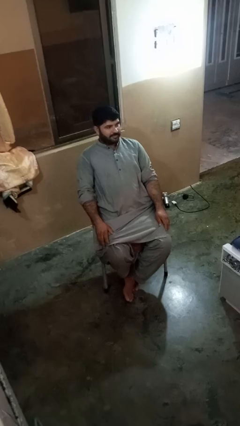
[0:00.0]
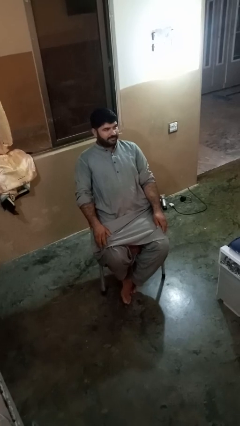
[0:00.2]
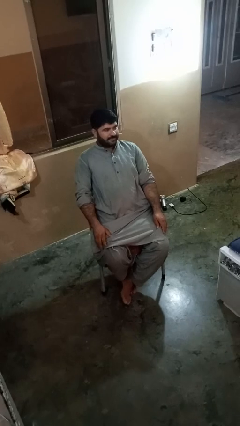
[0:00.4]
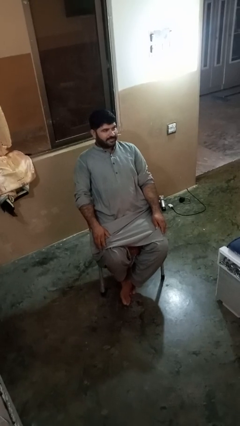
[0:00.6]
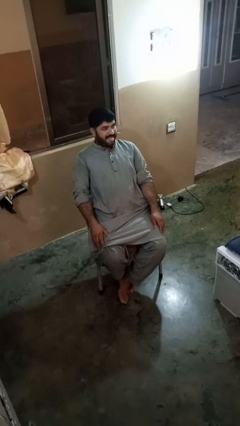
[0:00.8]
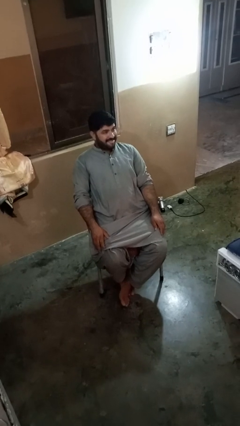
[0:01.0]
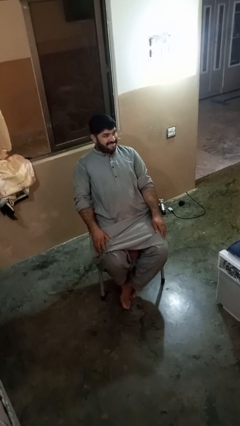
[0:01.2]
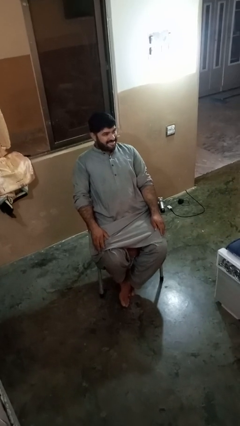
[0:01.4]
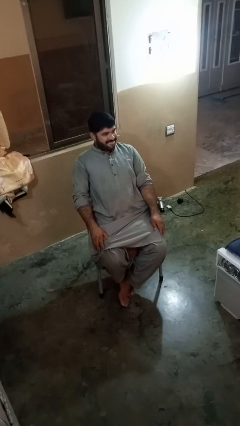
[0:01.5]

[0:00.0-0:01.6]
person sticks out tongue

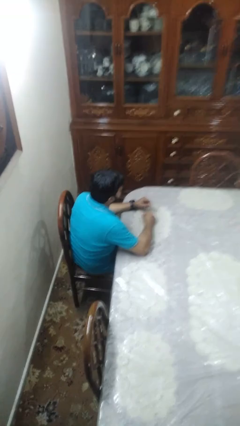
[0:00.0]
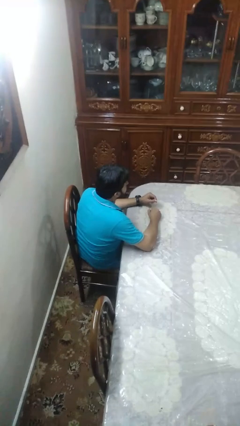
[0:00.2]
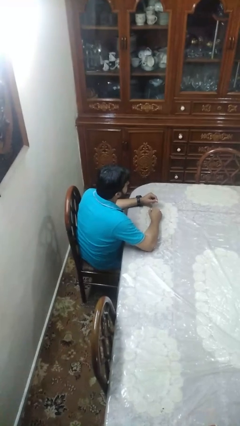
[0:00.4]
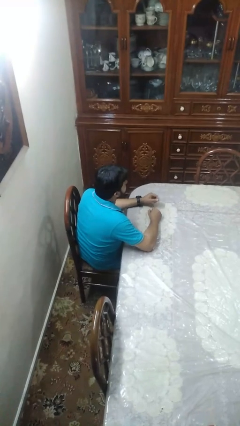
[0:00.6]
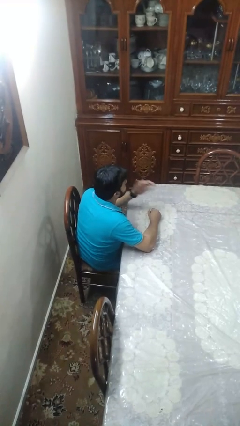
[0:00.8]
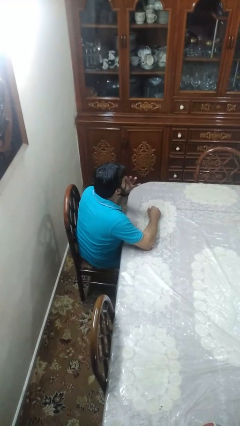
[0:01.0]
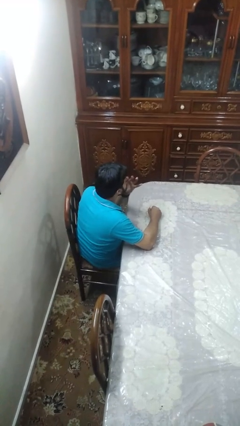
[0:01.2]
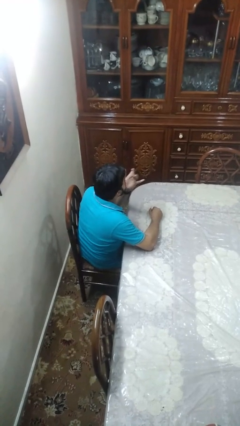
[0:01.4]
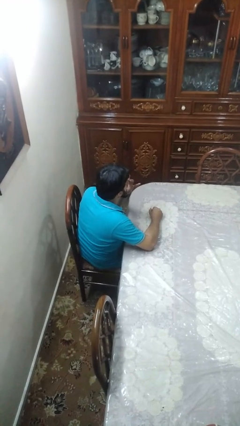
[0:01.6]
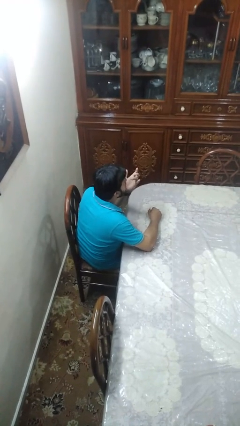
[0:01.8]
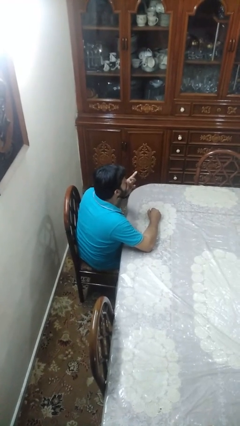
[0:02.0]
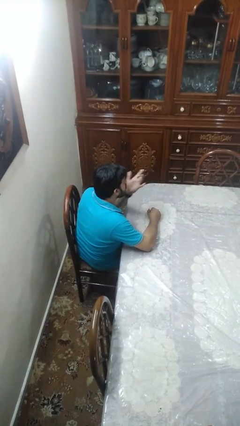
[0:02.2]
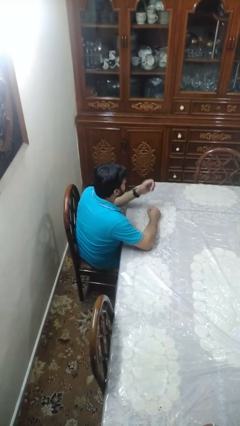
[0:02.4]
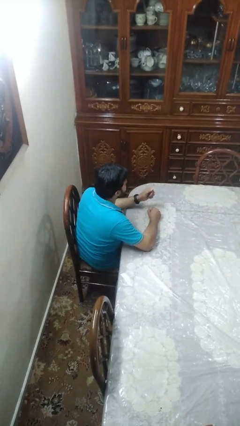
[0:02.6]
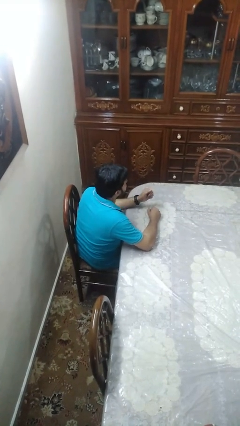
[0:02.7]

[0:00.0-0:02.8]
person licks fingers

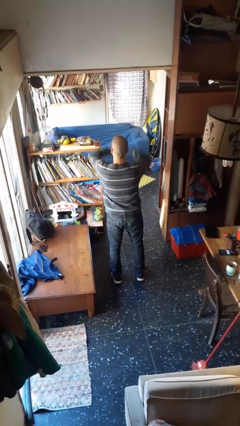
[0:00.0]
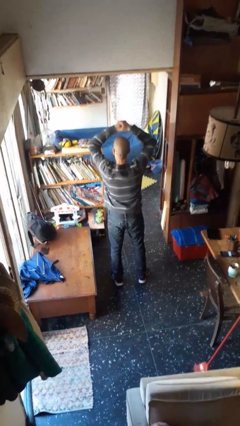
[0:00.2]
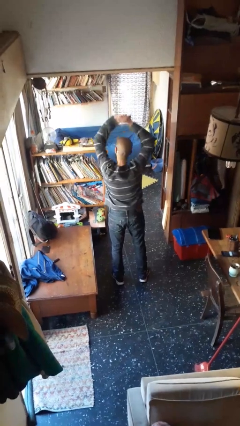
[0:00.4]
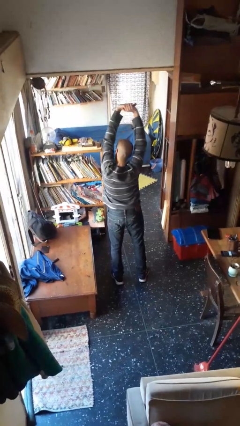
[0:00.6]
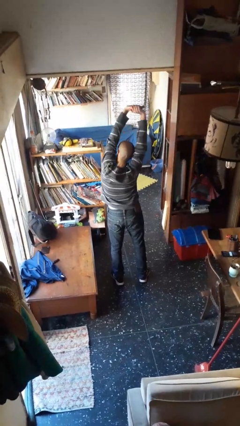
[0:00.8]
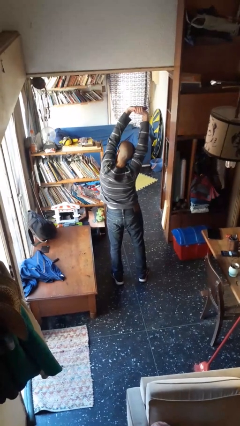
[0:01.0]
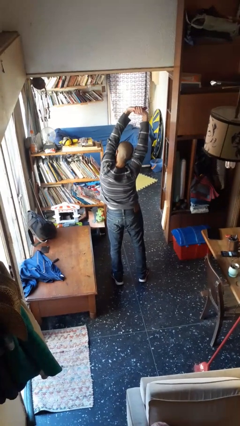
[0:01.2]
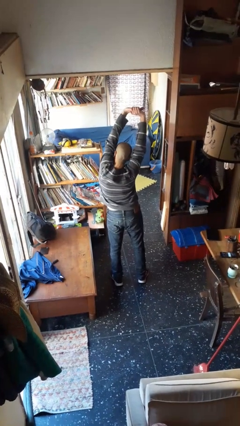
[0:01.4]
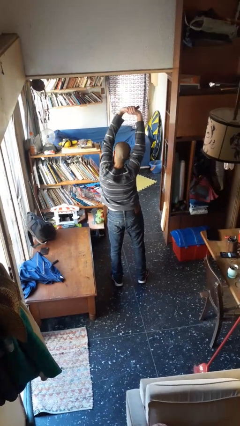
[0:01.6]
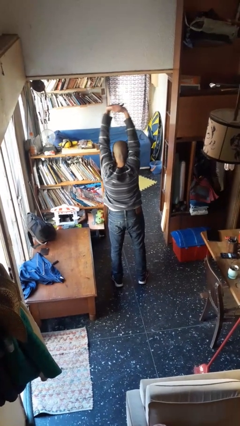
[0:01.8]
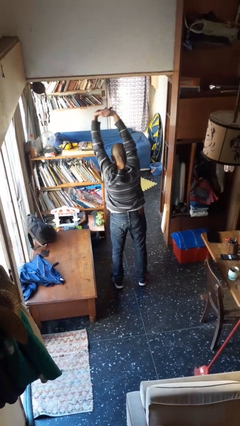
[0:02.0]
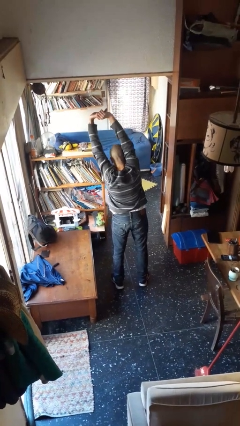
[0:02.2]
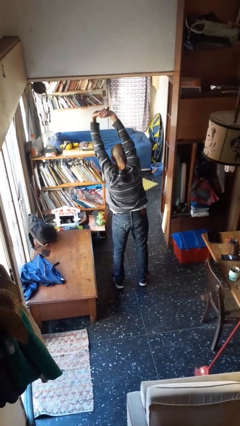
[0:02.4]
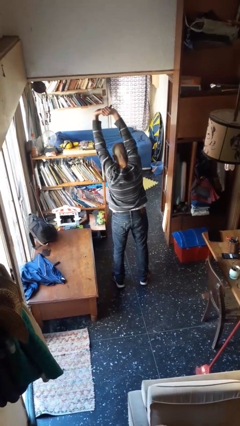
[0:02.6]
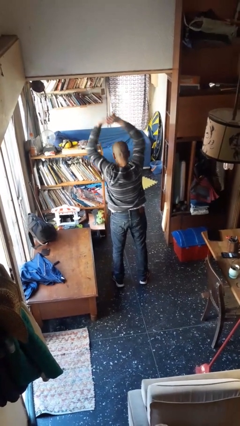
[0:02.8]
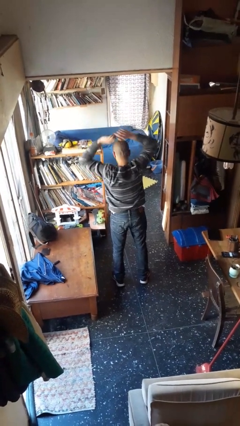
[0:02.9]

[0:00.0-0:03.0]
person stretches arms over head

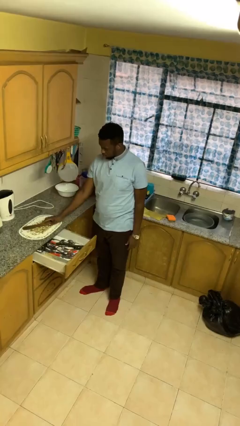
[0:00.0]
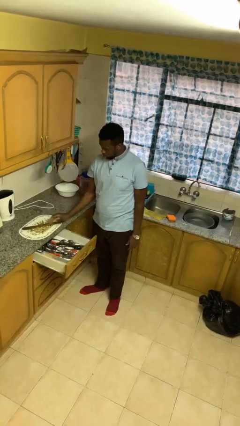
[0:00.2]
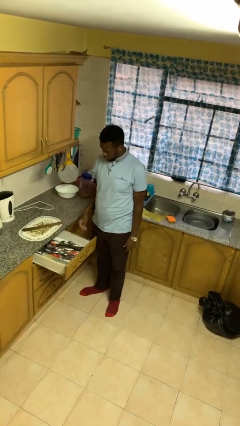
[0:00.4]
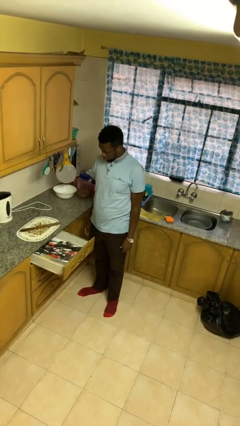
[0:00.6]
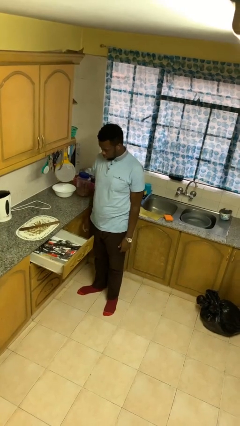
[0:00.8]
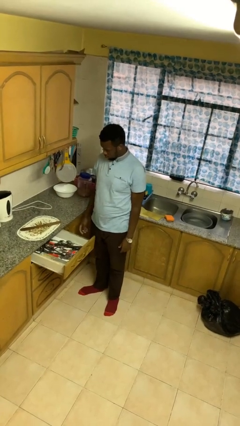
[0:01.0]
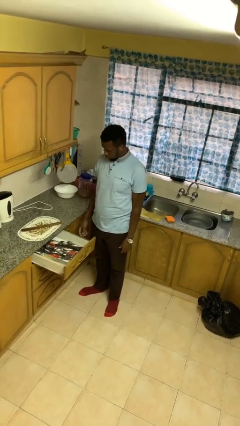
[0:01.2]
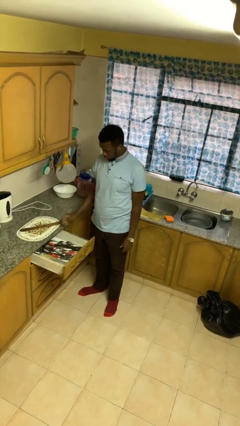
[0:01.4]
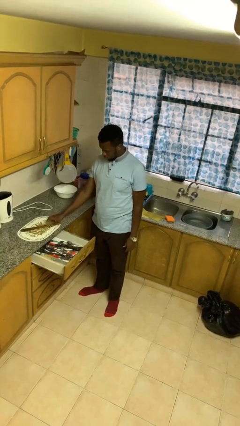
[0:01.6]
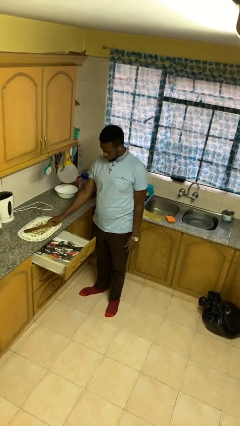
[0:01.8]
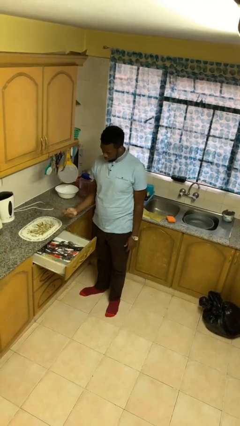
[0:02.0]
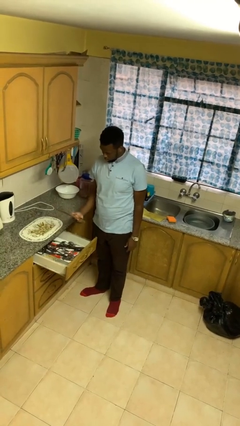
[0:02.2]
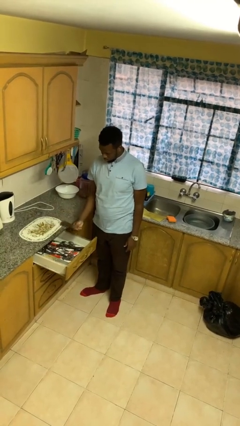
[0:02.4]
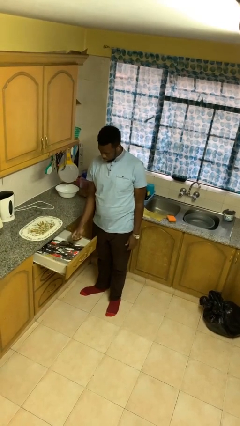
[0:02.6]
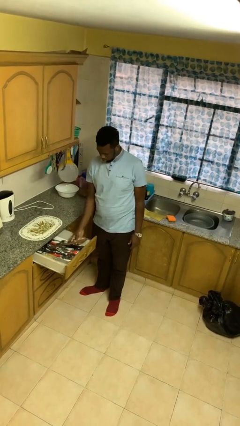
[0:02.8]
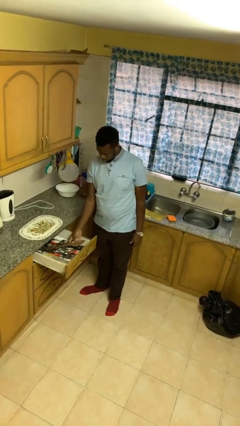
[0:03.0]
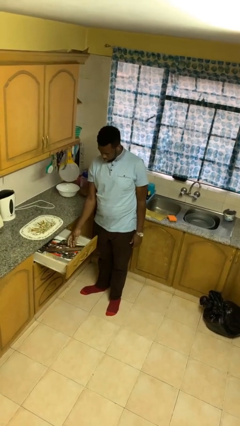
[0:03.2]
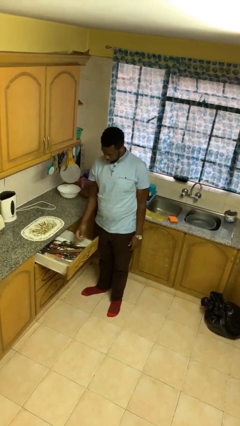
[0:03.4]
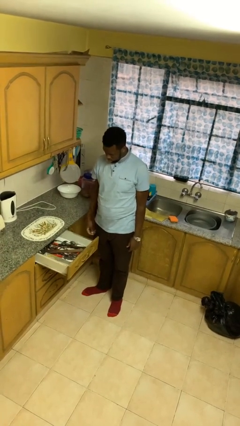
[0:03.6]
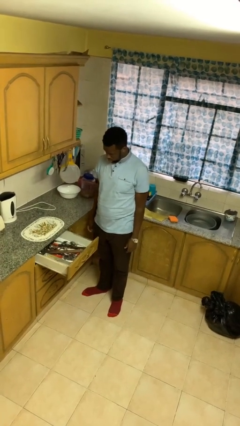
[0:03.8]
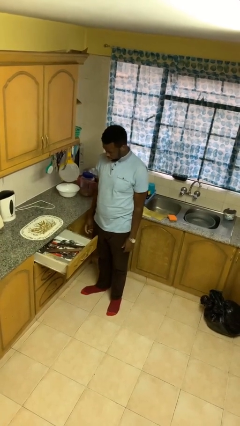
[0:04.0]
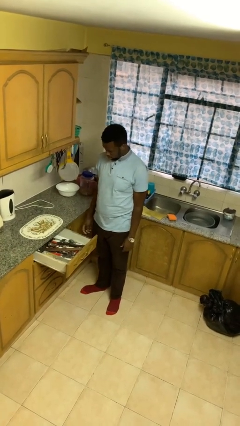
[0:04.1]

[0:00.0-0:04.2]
person puts object into kitchen drawer

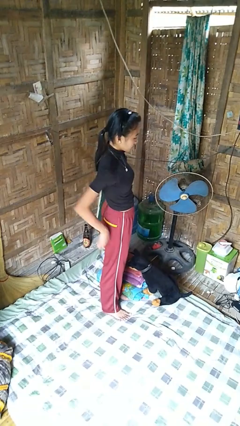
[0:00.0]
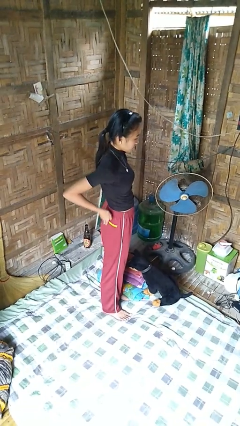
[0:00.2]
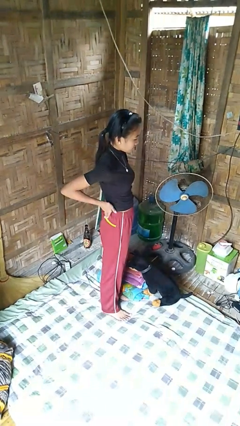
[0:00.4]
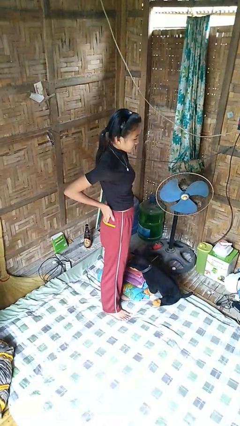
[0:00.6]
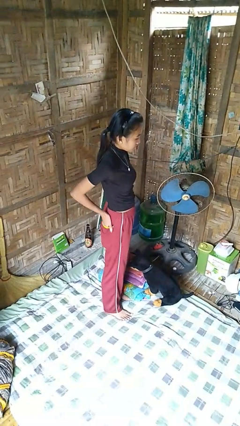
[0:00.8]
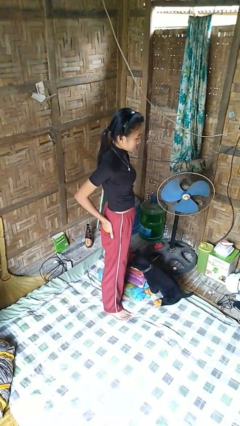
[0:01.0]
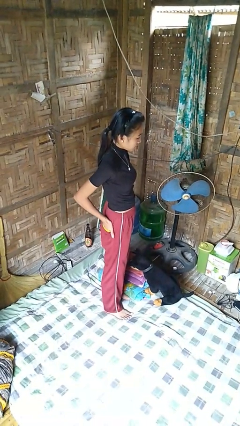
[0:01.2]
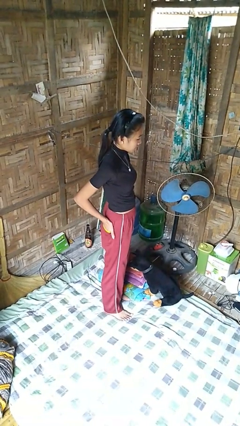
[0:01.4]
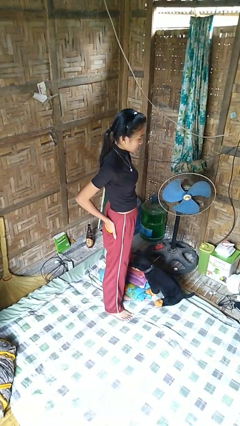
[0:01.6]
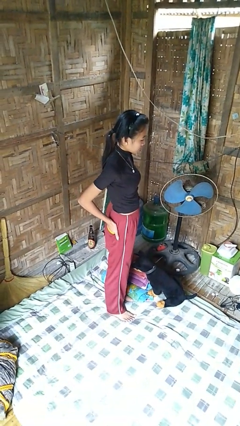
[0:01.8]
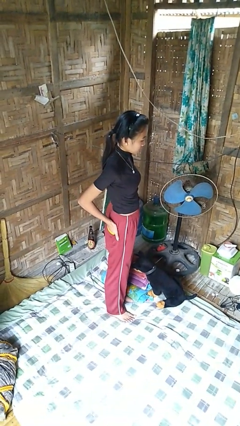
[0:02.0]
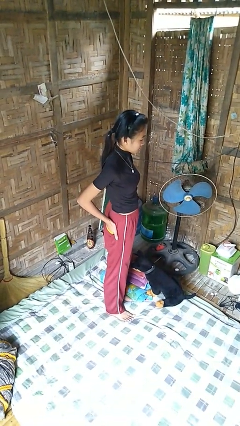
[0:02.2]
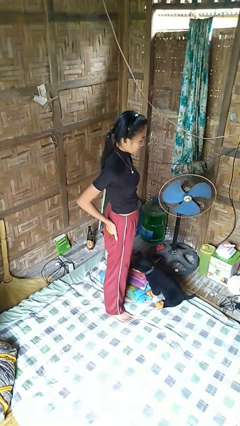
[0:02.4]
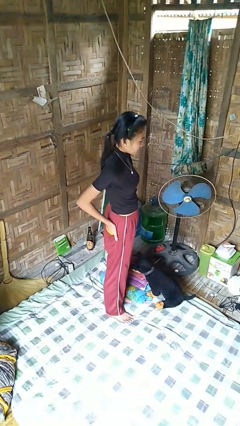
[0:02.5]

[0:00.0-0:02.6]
person puts hands in back pockets

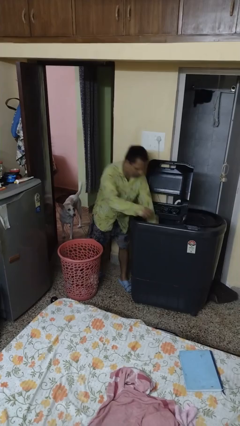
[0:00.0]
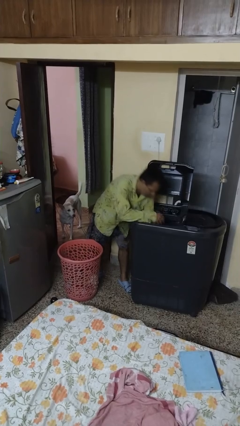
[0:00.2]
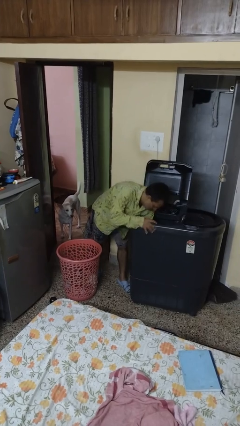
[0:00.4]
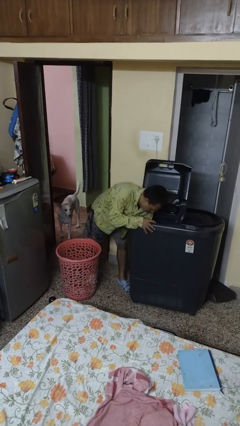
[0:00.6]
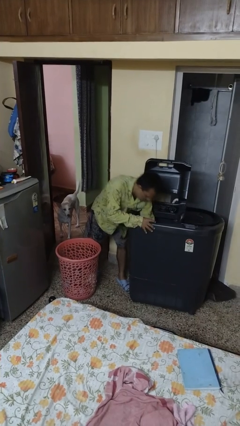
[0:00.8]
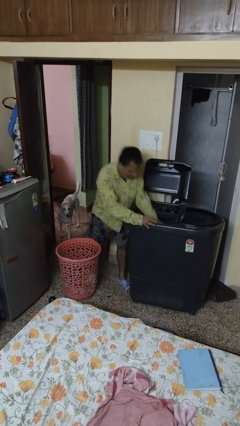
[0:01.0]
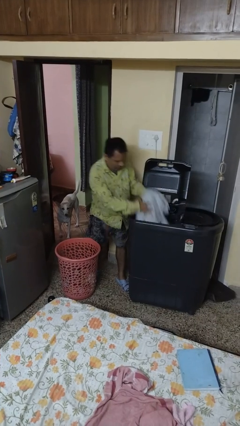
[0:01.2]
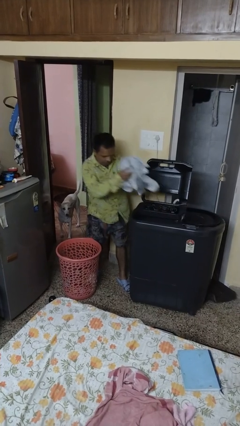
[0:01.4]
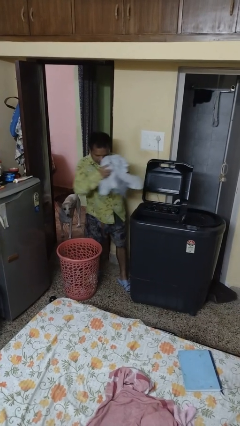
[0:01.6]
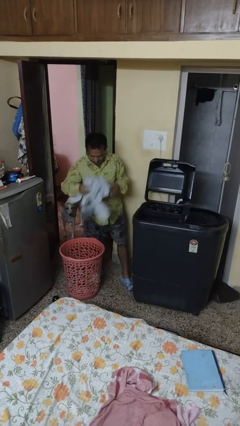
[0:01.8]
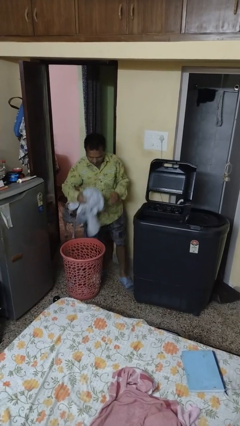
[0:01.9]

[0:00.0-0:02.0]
person unloads clotheswasher

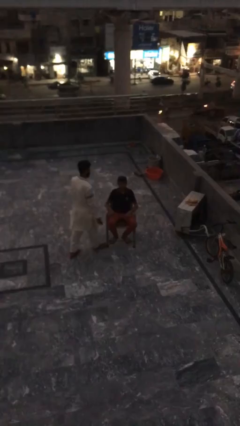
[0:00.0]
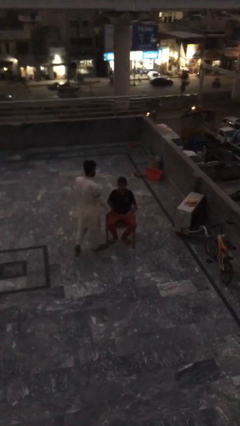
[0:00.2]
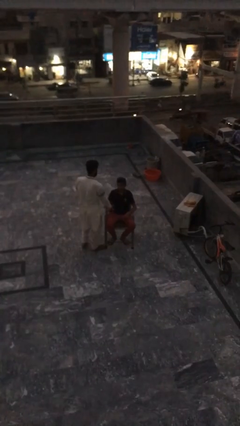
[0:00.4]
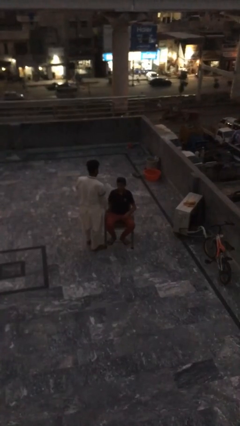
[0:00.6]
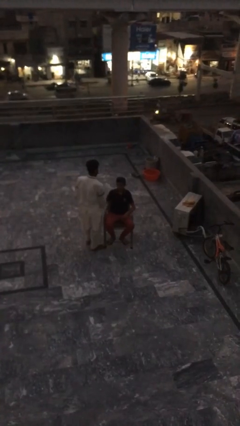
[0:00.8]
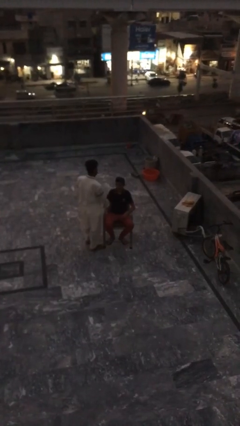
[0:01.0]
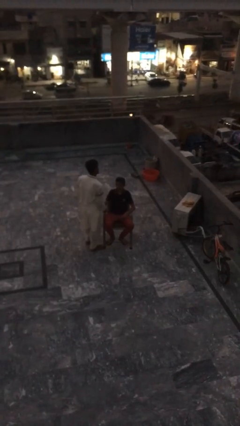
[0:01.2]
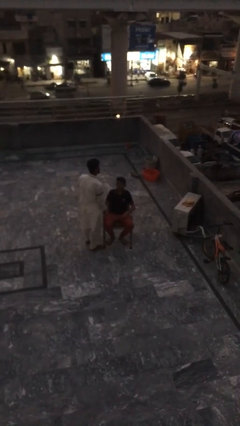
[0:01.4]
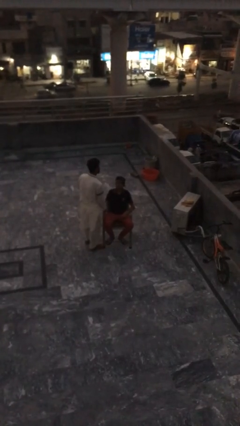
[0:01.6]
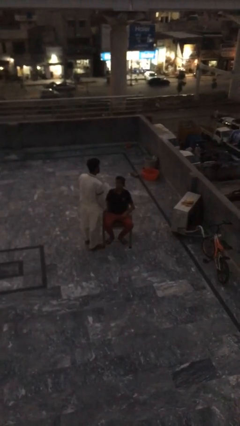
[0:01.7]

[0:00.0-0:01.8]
person shakes hand
